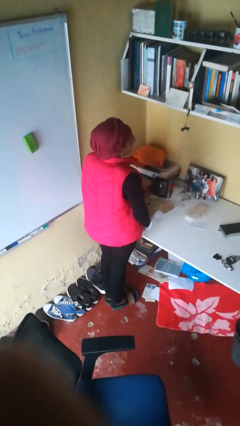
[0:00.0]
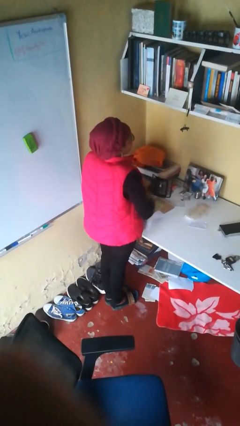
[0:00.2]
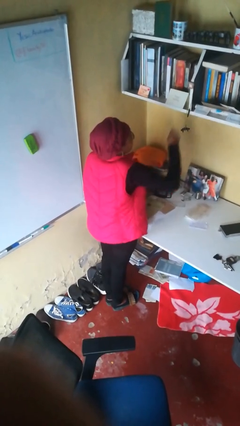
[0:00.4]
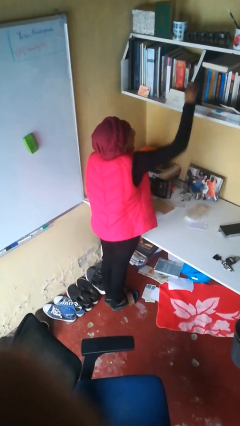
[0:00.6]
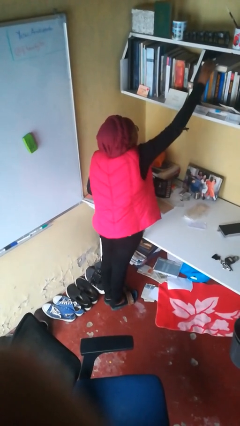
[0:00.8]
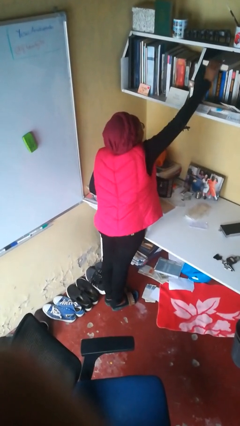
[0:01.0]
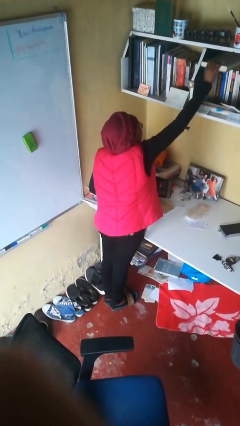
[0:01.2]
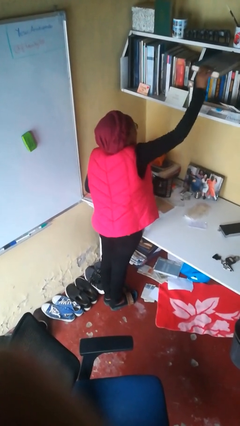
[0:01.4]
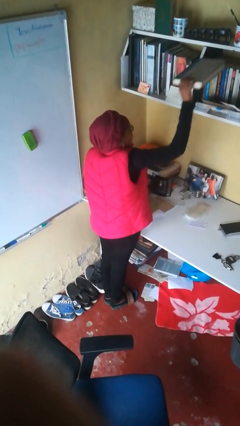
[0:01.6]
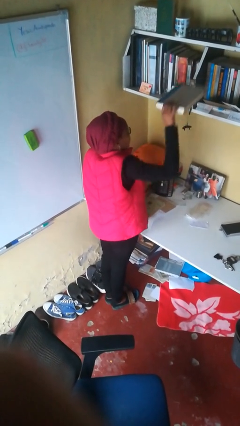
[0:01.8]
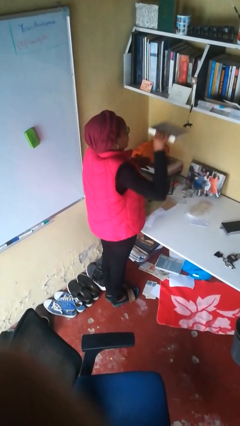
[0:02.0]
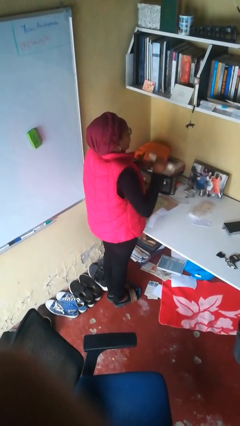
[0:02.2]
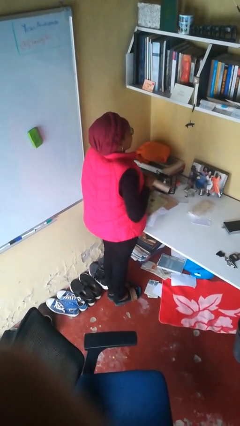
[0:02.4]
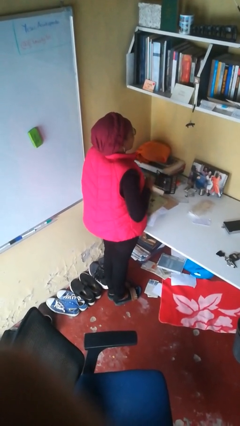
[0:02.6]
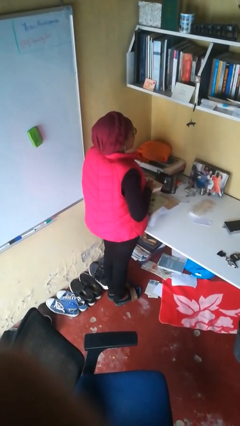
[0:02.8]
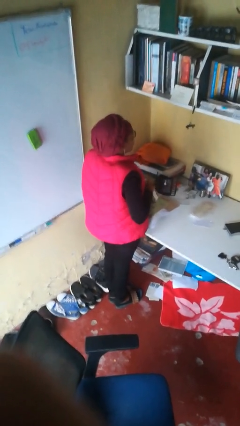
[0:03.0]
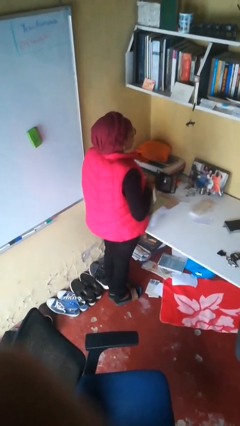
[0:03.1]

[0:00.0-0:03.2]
person picks up object from shelf

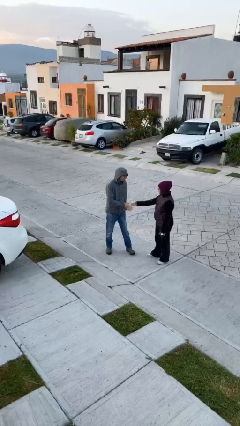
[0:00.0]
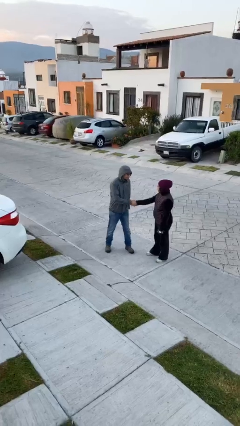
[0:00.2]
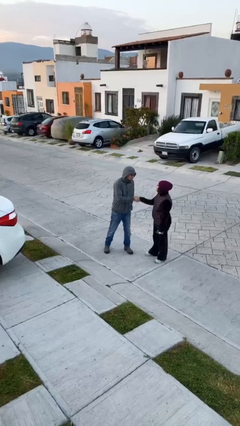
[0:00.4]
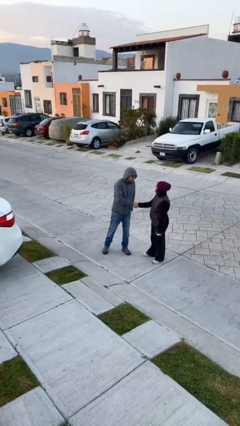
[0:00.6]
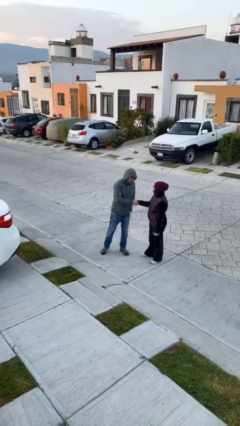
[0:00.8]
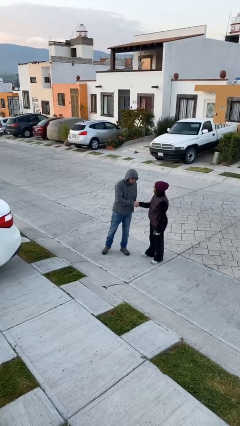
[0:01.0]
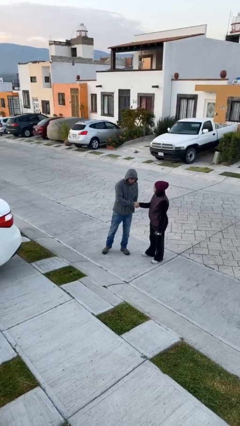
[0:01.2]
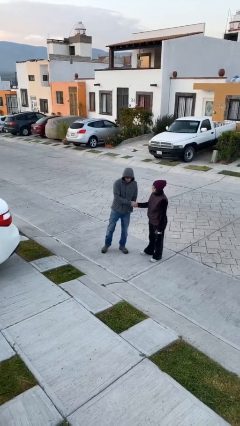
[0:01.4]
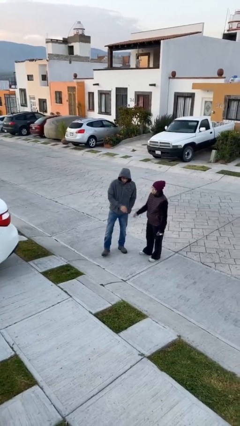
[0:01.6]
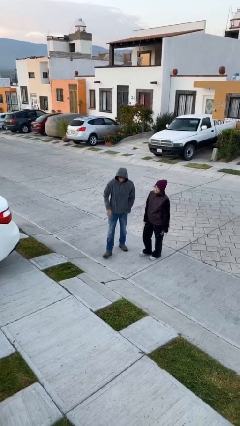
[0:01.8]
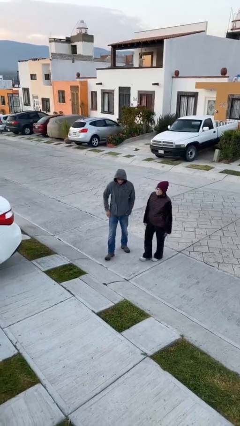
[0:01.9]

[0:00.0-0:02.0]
person shakes hand

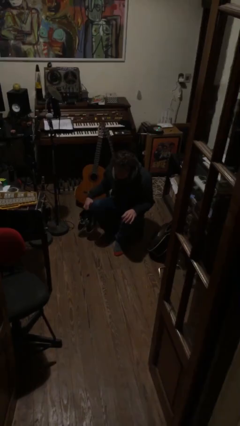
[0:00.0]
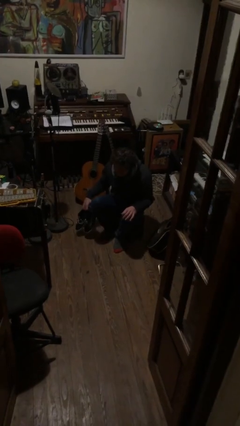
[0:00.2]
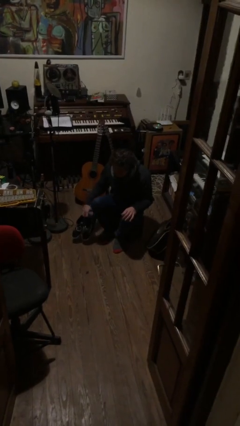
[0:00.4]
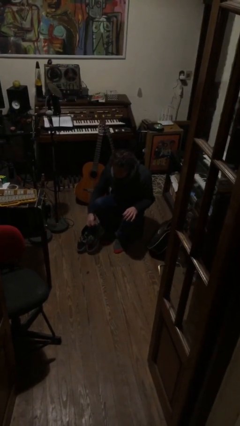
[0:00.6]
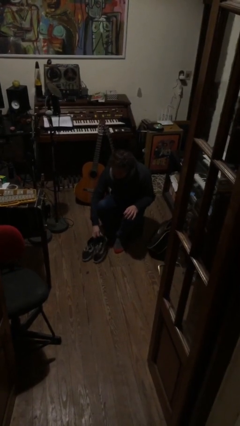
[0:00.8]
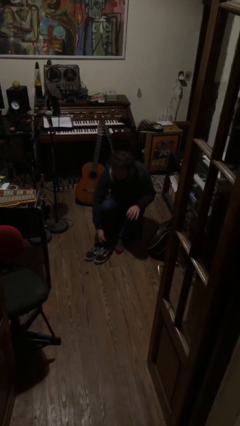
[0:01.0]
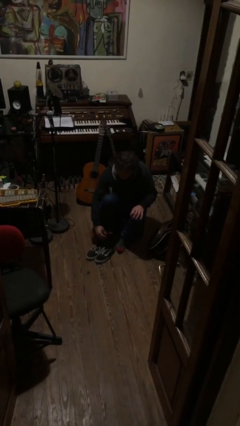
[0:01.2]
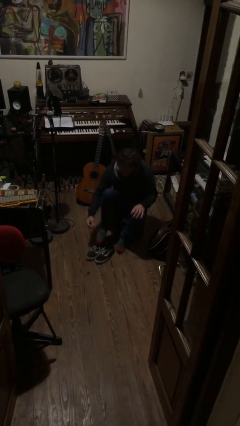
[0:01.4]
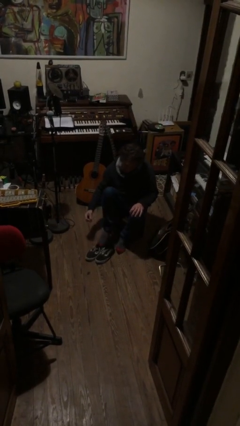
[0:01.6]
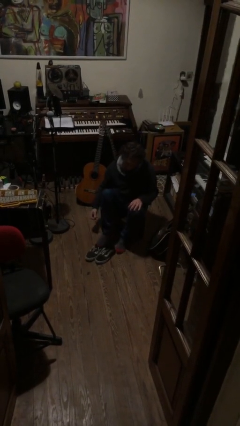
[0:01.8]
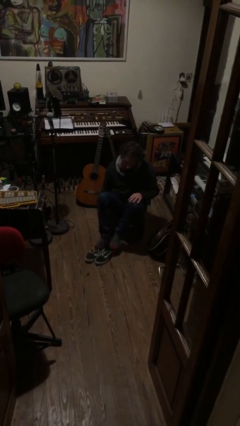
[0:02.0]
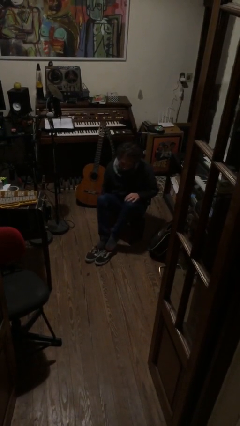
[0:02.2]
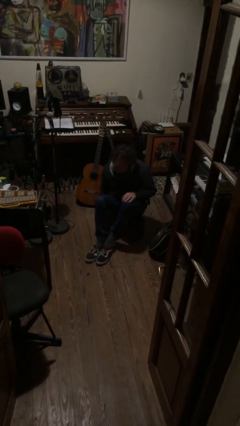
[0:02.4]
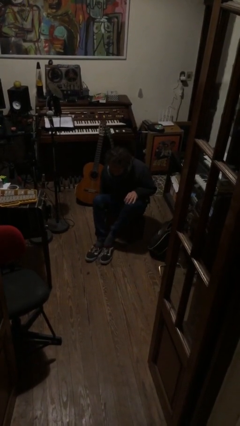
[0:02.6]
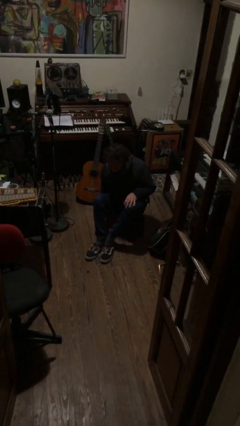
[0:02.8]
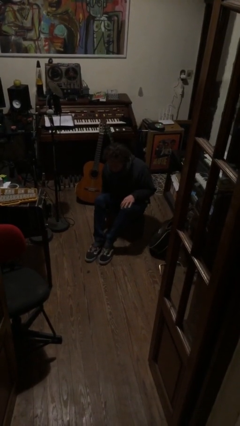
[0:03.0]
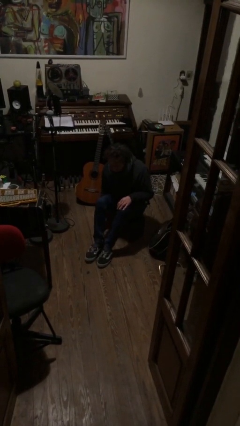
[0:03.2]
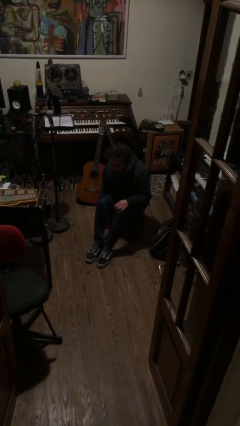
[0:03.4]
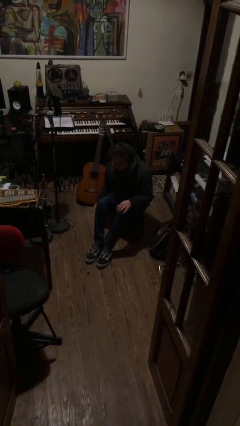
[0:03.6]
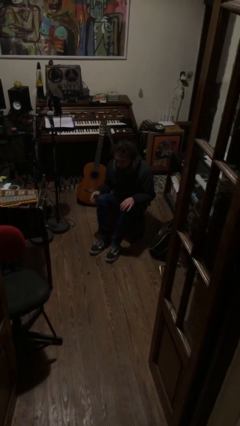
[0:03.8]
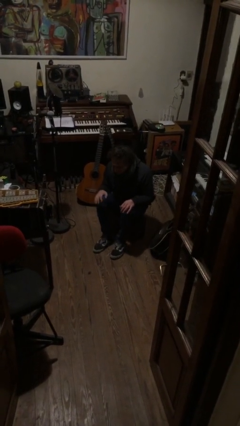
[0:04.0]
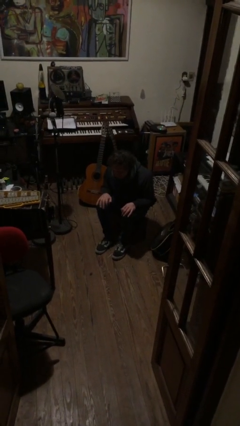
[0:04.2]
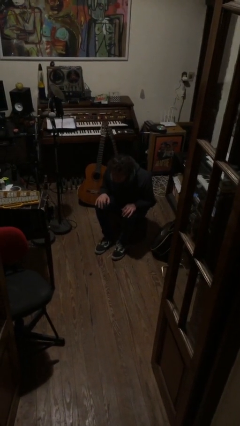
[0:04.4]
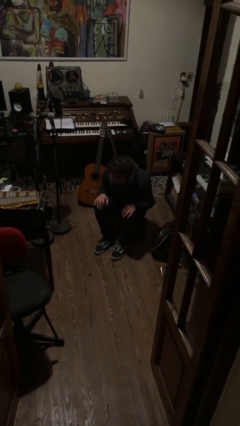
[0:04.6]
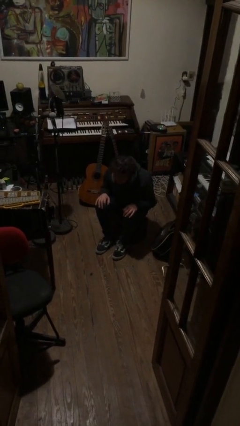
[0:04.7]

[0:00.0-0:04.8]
person puts on shoes

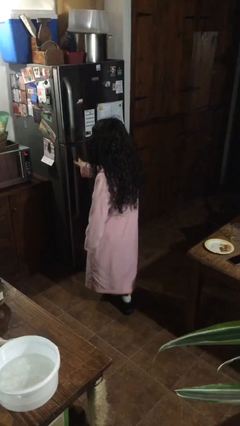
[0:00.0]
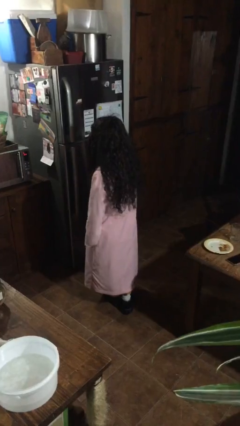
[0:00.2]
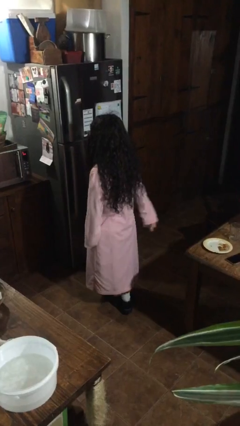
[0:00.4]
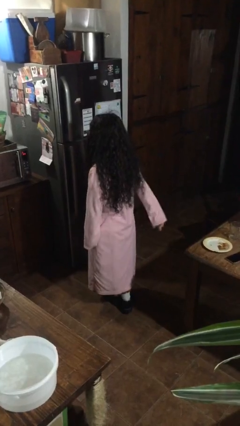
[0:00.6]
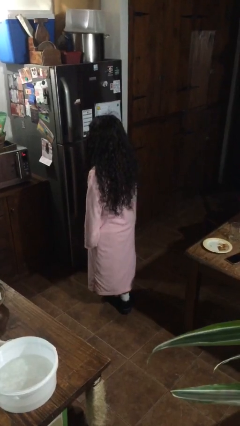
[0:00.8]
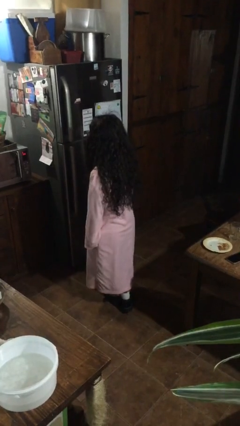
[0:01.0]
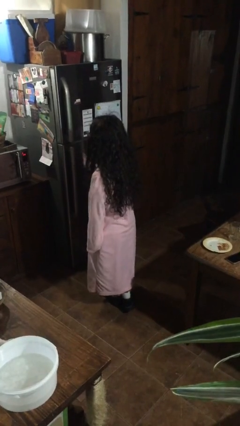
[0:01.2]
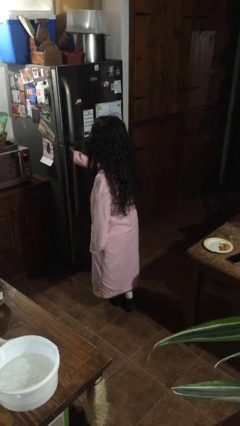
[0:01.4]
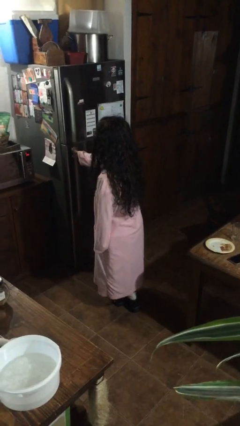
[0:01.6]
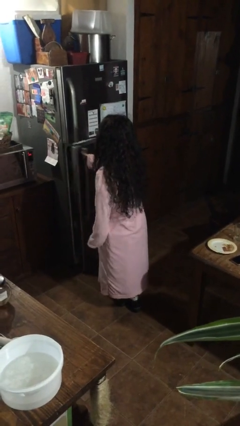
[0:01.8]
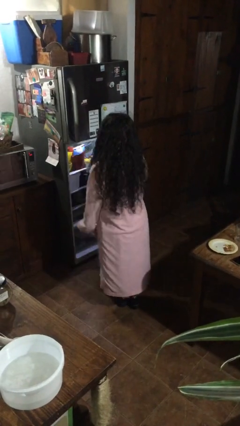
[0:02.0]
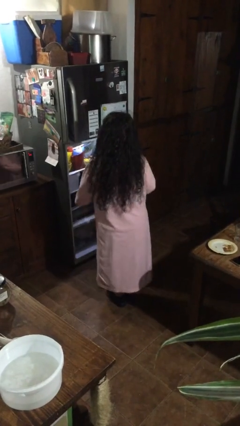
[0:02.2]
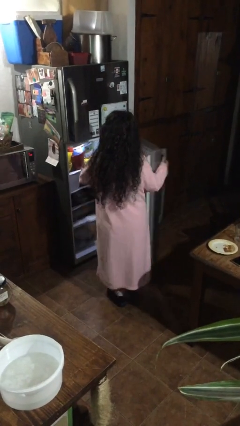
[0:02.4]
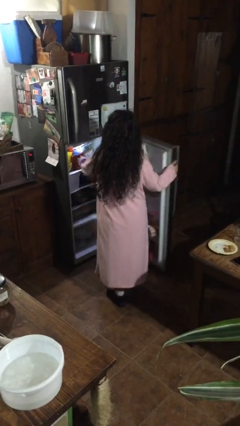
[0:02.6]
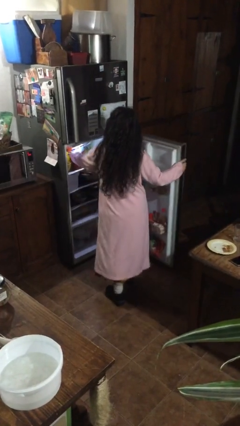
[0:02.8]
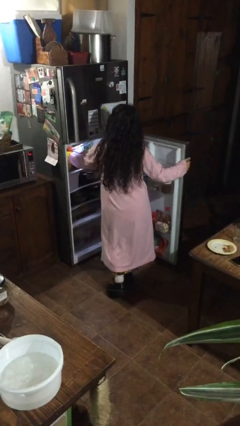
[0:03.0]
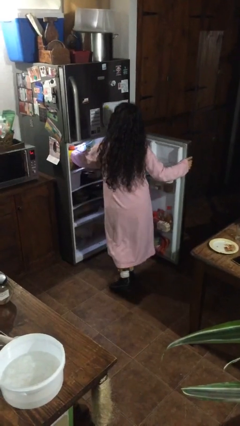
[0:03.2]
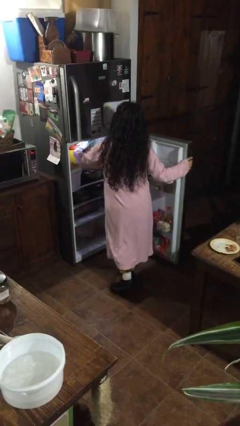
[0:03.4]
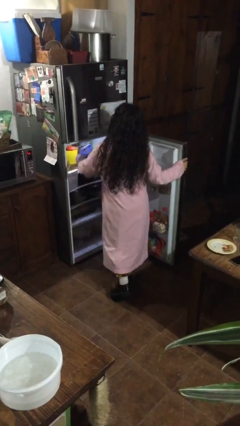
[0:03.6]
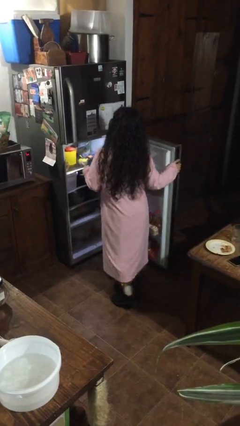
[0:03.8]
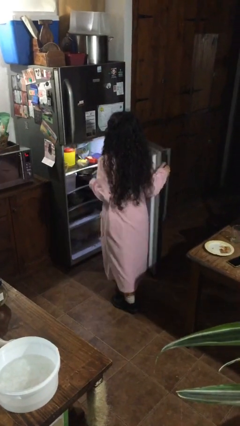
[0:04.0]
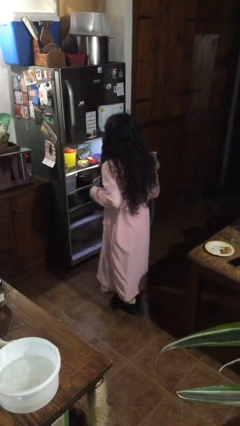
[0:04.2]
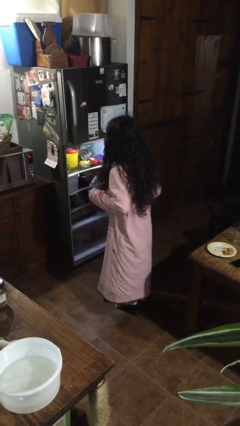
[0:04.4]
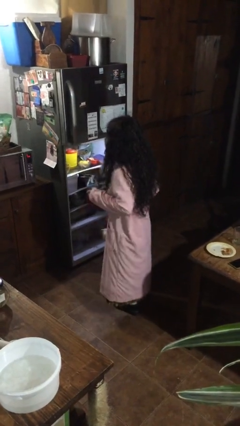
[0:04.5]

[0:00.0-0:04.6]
person takes object from refrigerator

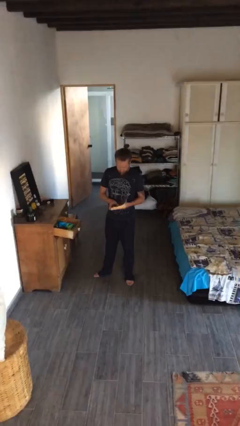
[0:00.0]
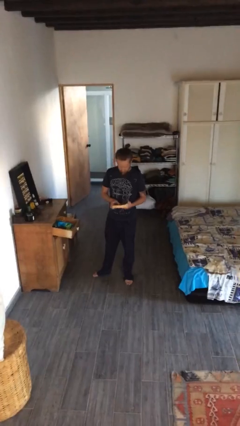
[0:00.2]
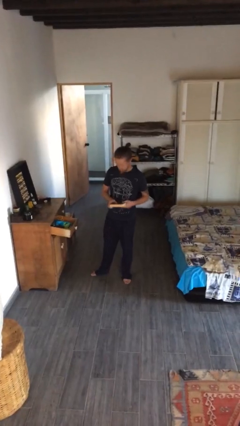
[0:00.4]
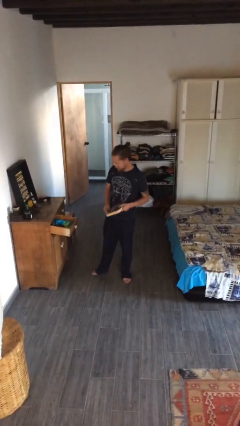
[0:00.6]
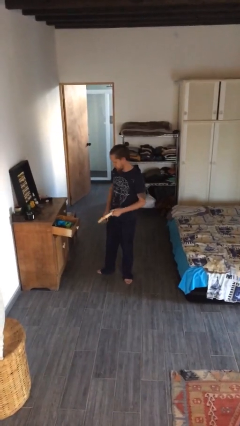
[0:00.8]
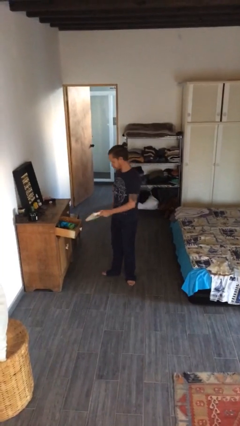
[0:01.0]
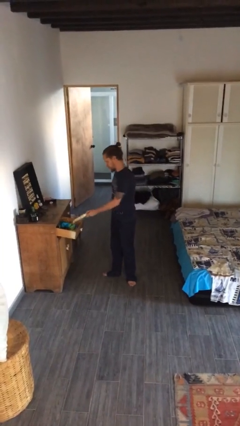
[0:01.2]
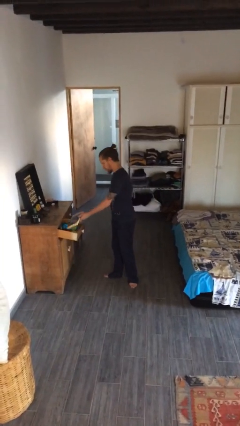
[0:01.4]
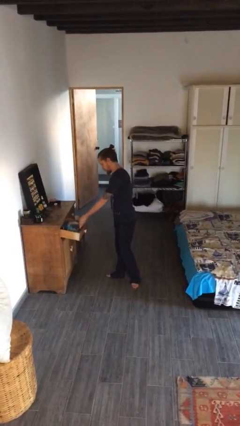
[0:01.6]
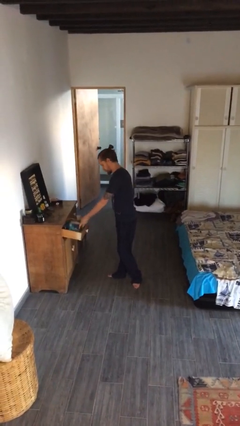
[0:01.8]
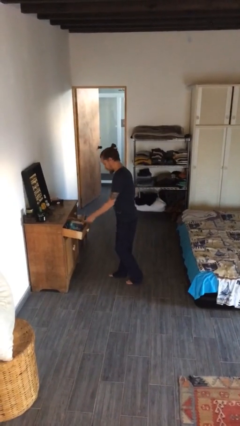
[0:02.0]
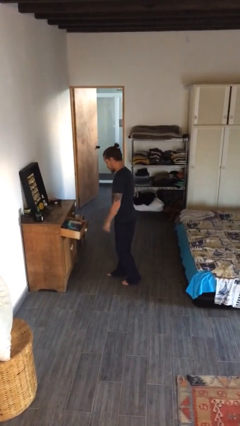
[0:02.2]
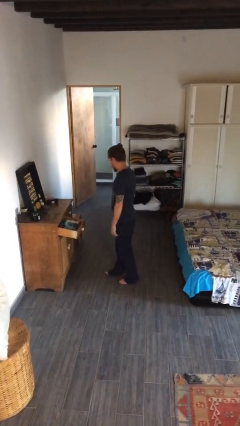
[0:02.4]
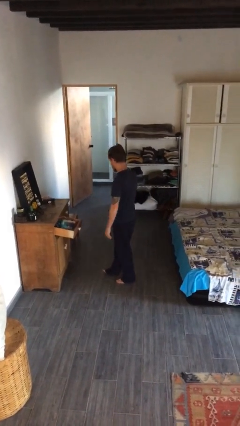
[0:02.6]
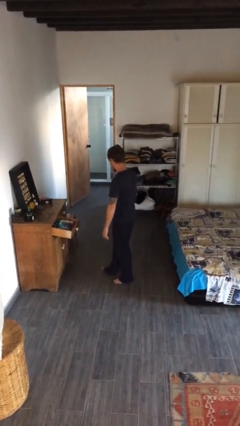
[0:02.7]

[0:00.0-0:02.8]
person puts down object into cabinet
